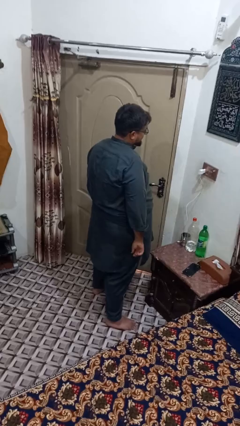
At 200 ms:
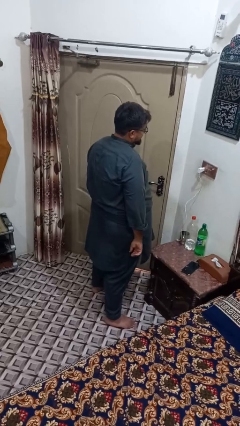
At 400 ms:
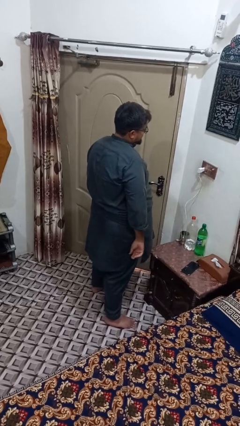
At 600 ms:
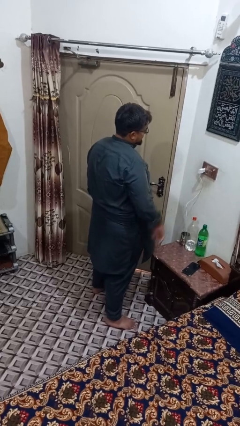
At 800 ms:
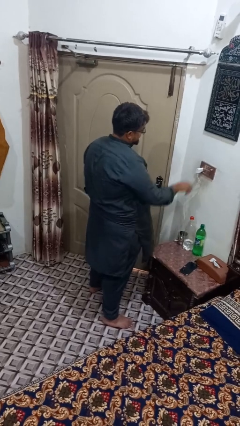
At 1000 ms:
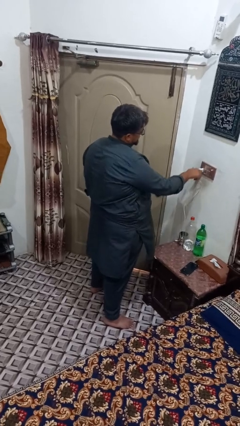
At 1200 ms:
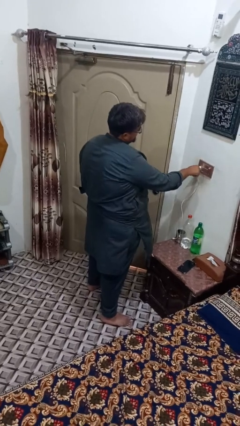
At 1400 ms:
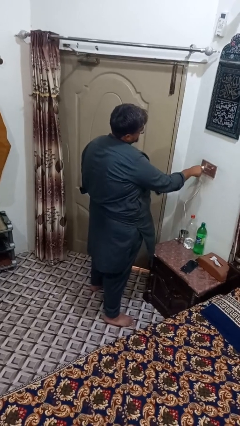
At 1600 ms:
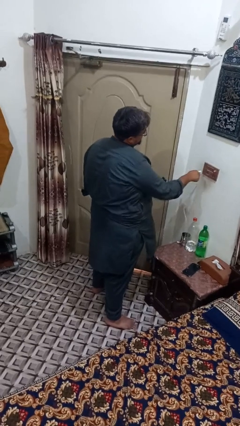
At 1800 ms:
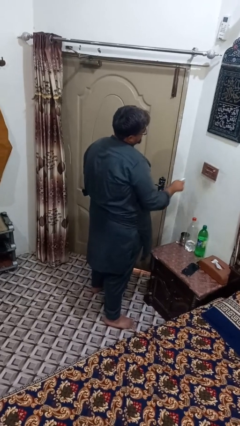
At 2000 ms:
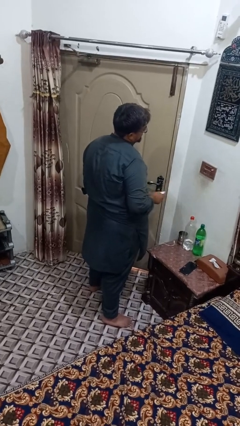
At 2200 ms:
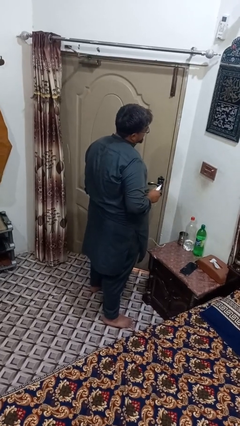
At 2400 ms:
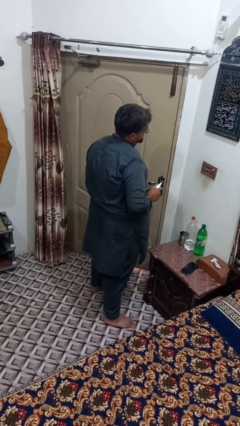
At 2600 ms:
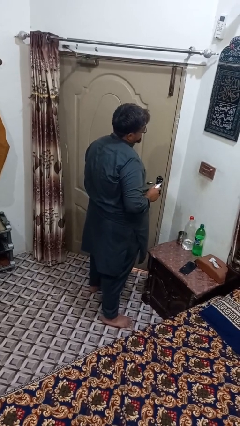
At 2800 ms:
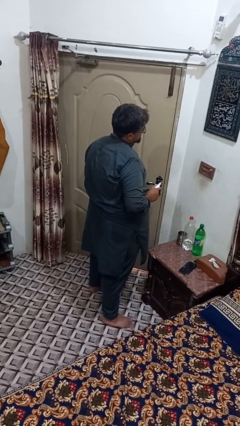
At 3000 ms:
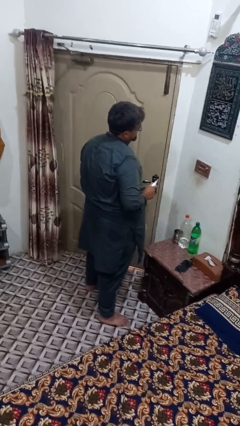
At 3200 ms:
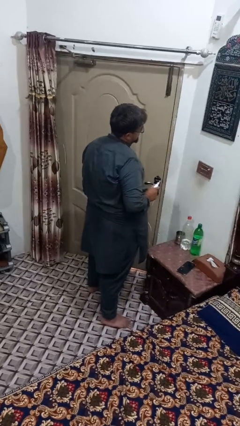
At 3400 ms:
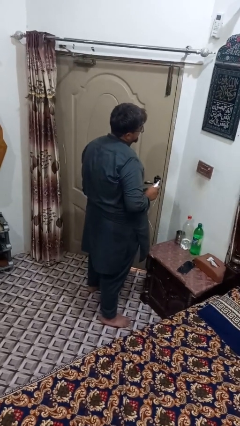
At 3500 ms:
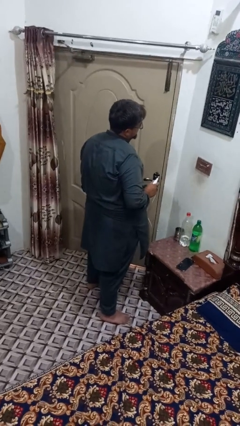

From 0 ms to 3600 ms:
person unplugs from electrical socket

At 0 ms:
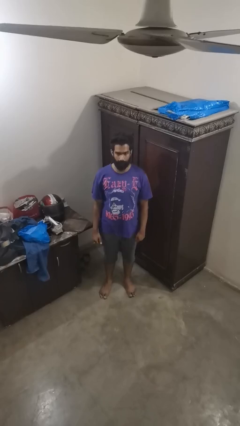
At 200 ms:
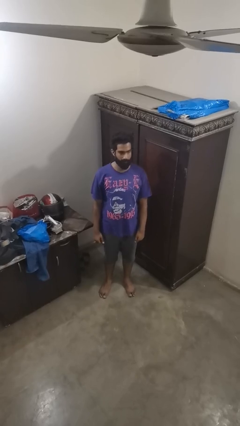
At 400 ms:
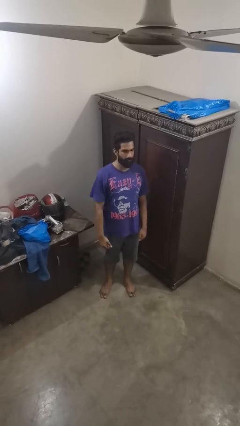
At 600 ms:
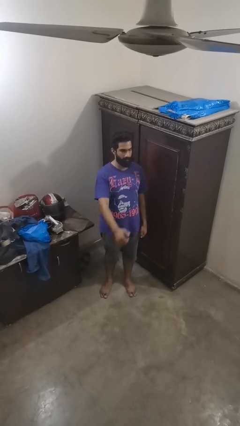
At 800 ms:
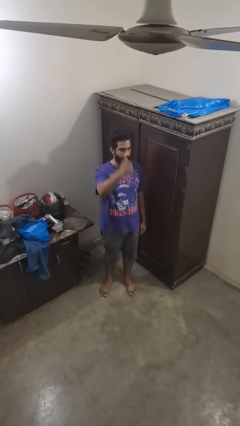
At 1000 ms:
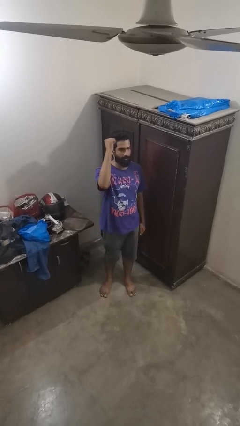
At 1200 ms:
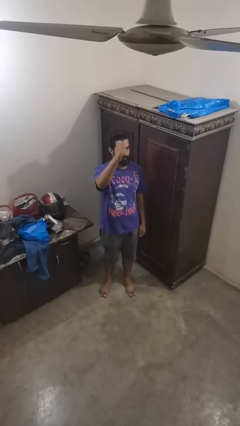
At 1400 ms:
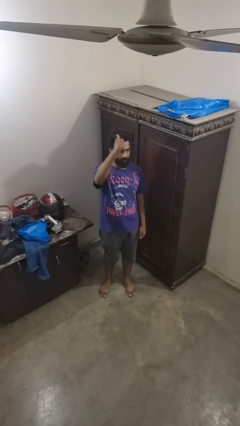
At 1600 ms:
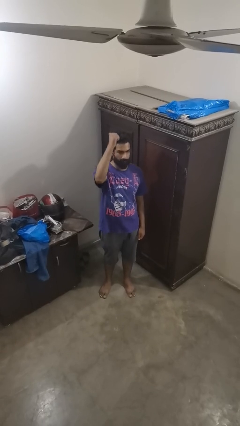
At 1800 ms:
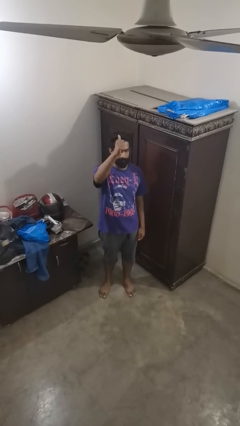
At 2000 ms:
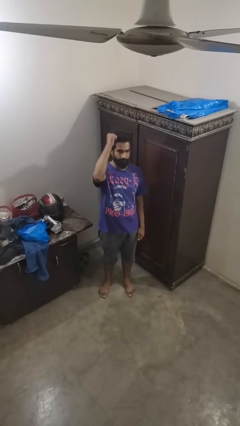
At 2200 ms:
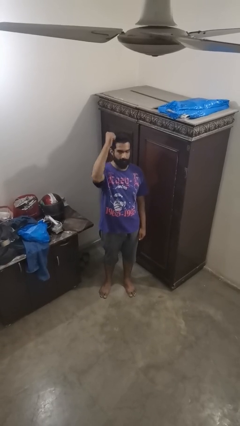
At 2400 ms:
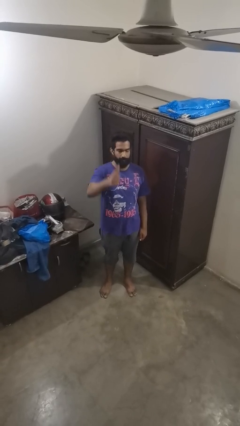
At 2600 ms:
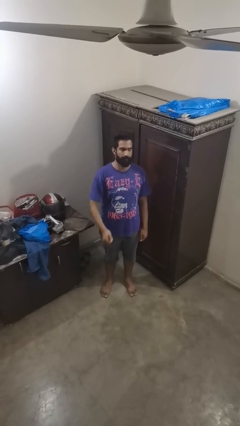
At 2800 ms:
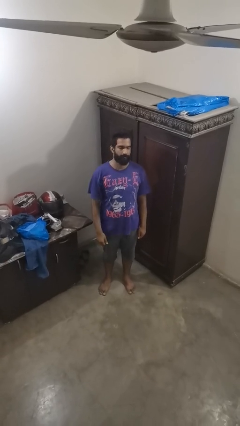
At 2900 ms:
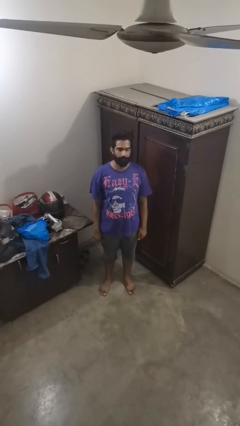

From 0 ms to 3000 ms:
person gestures behind me

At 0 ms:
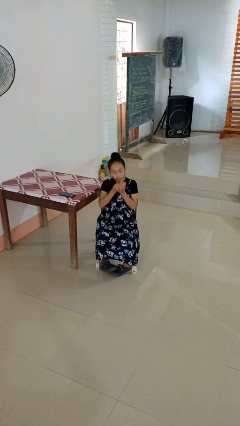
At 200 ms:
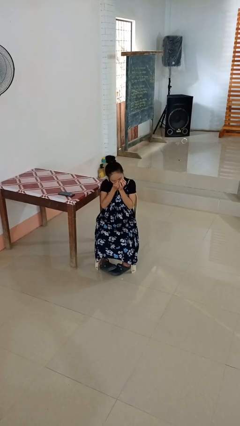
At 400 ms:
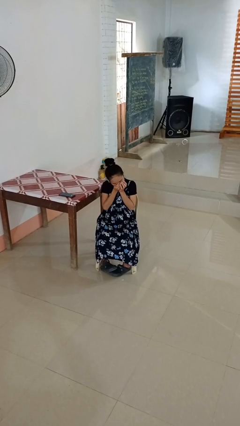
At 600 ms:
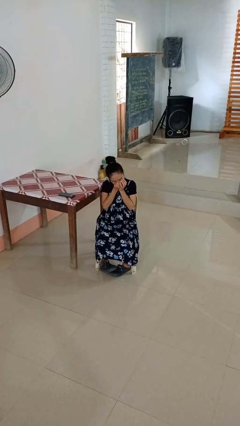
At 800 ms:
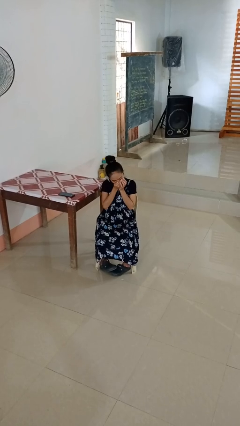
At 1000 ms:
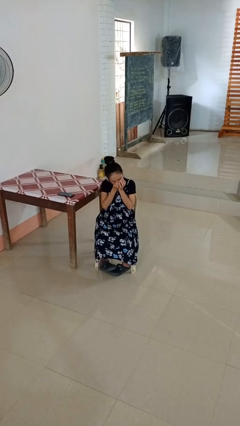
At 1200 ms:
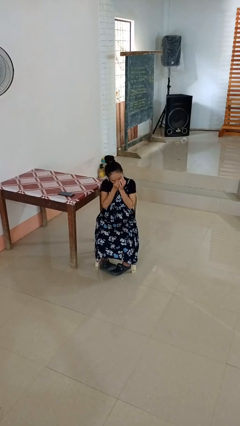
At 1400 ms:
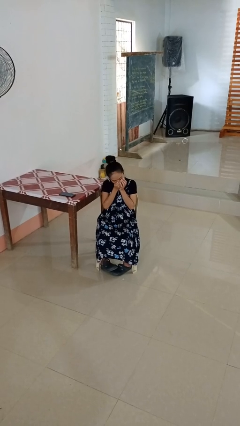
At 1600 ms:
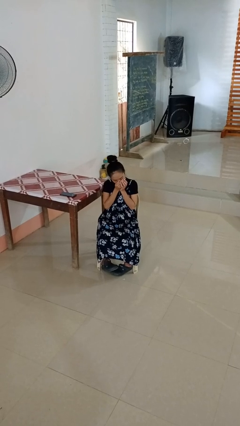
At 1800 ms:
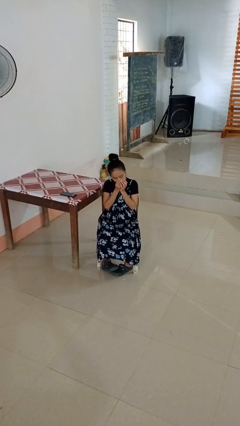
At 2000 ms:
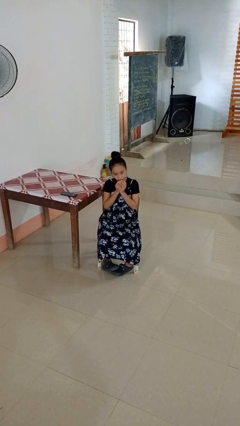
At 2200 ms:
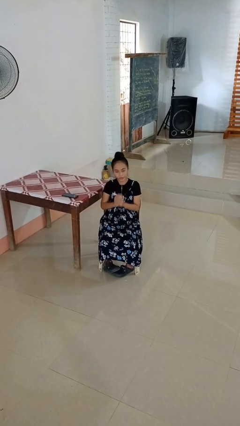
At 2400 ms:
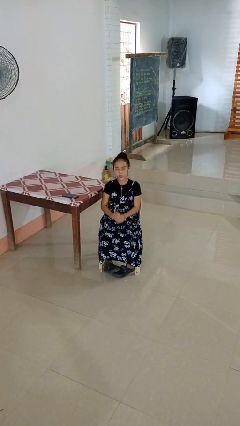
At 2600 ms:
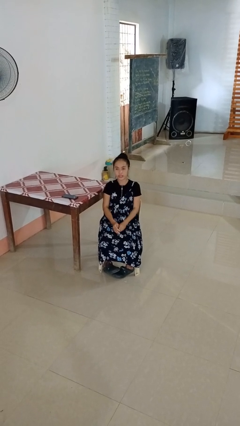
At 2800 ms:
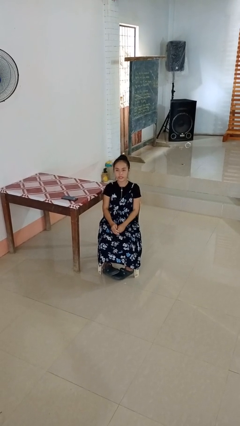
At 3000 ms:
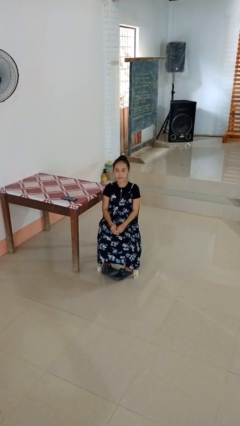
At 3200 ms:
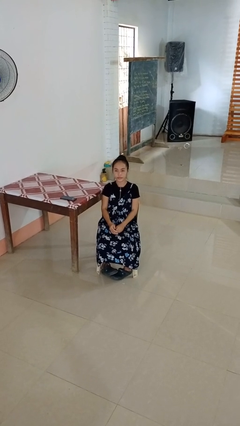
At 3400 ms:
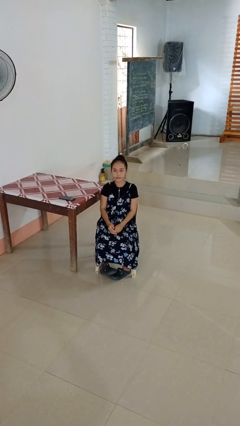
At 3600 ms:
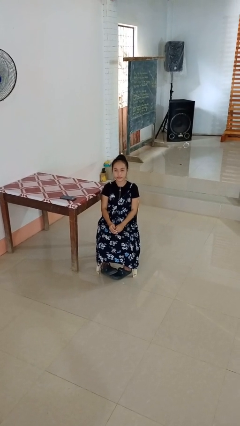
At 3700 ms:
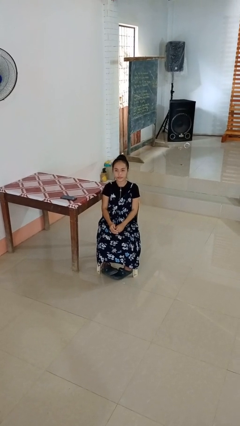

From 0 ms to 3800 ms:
person sneezes into hand

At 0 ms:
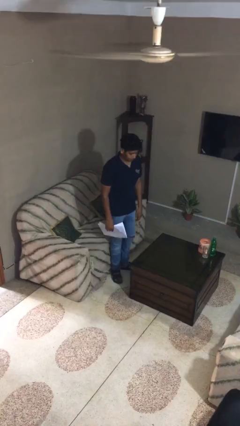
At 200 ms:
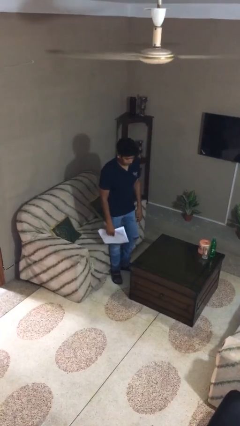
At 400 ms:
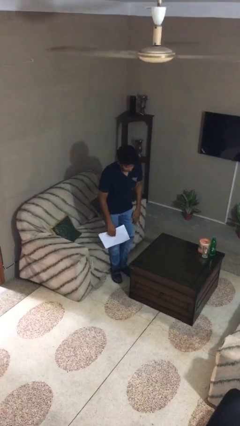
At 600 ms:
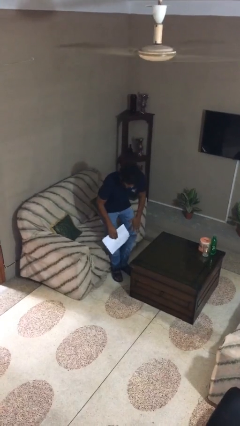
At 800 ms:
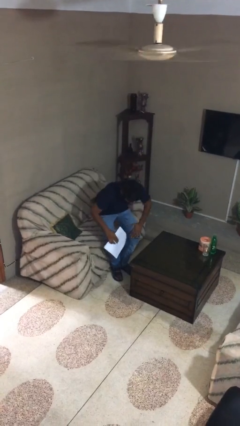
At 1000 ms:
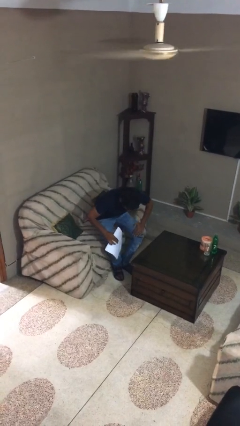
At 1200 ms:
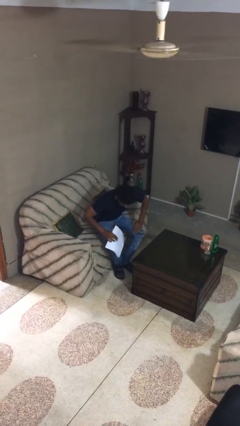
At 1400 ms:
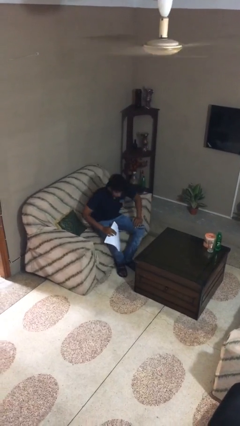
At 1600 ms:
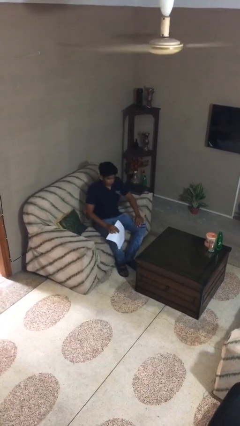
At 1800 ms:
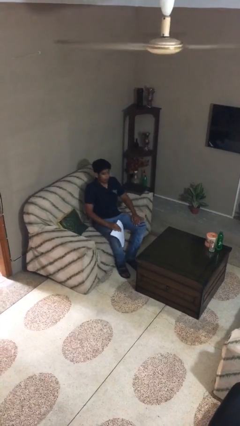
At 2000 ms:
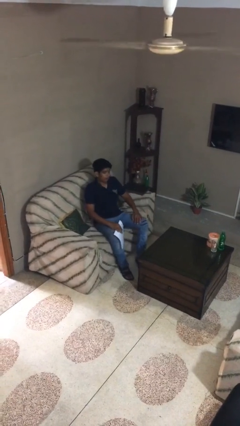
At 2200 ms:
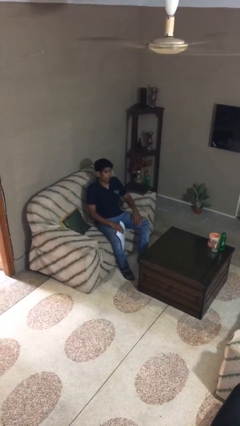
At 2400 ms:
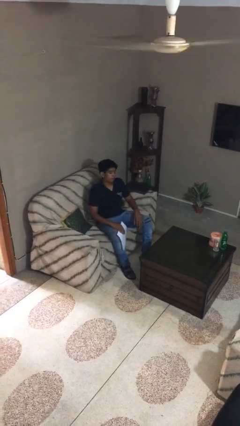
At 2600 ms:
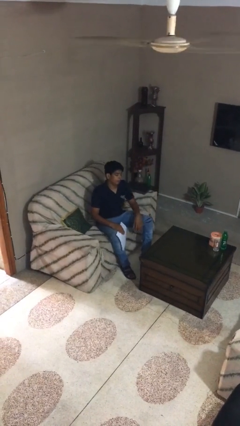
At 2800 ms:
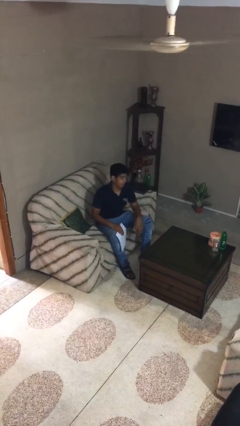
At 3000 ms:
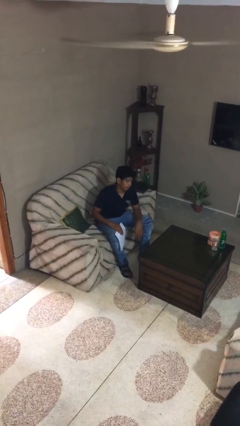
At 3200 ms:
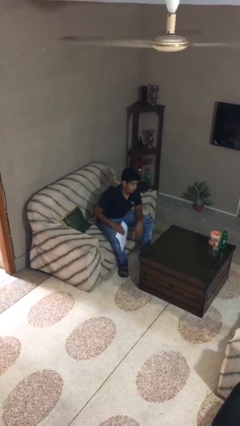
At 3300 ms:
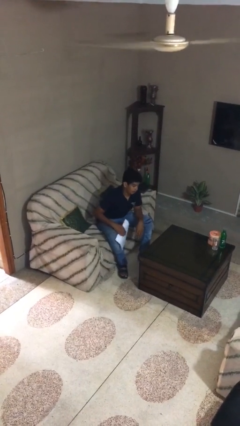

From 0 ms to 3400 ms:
person sits down

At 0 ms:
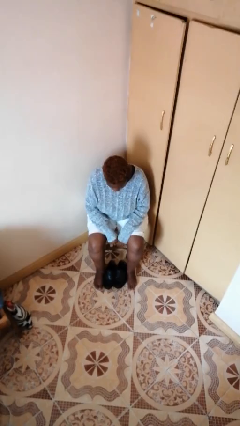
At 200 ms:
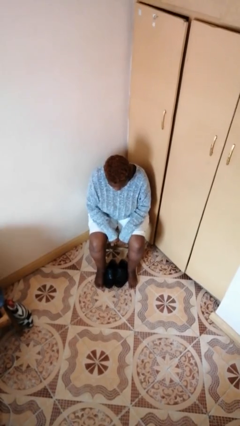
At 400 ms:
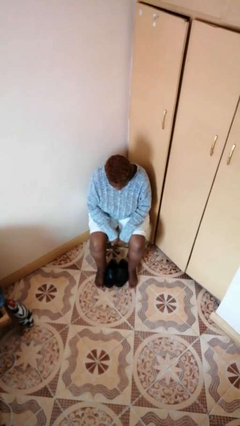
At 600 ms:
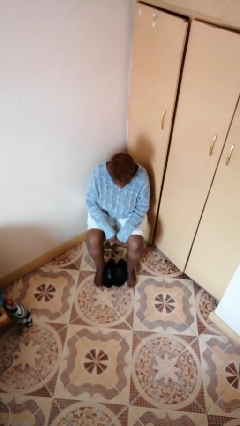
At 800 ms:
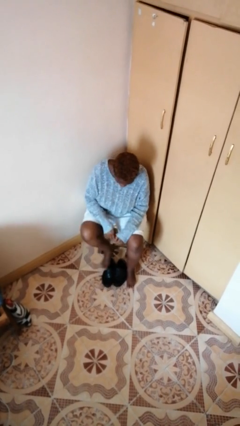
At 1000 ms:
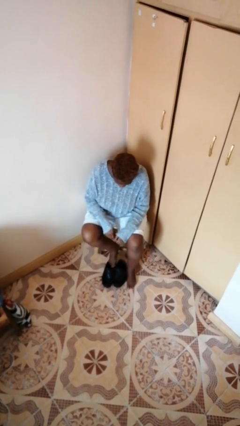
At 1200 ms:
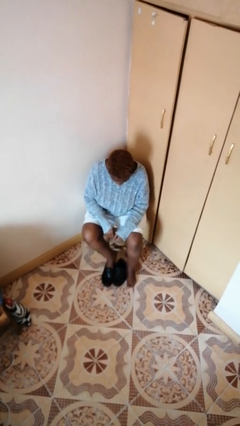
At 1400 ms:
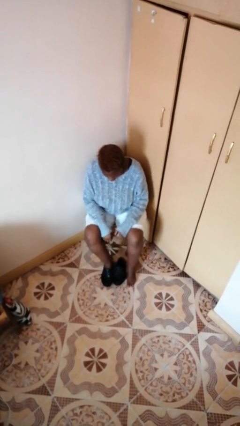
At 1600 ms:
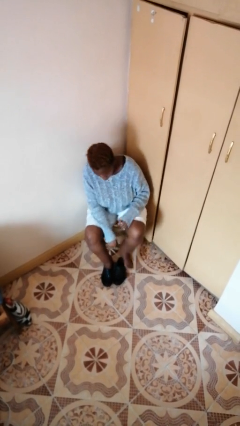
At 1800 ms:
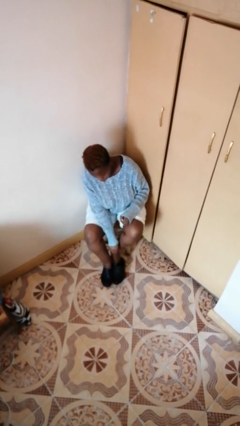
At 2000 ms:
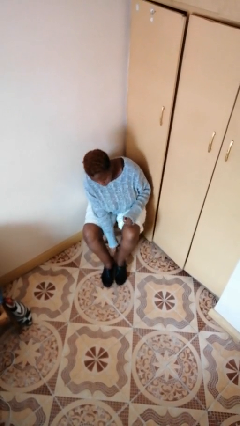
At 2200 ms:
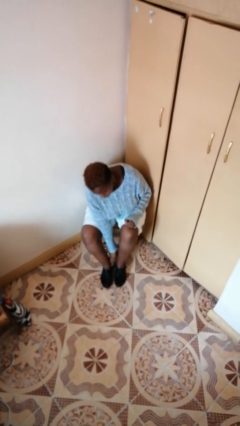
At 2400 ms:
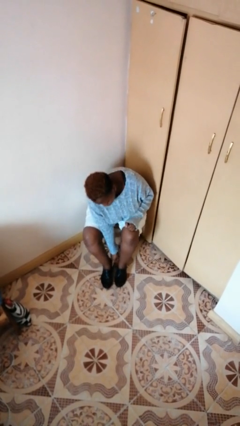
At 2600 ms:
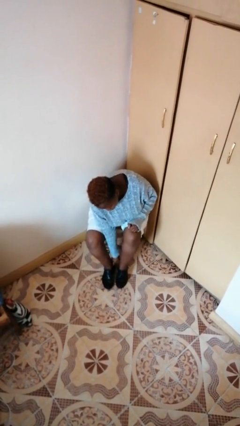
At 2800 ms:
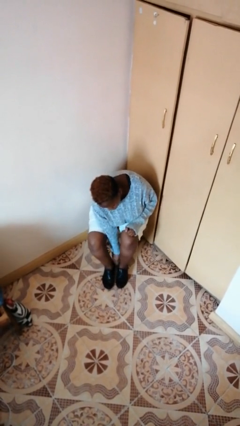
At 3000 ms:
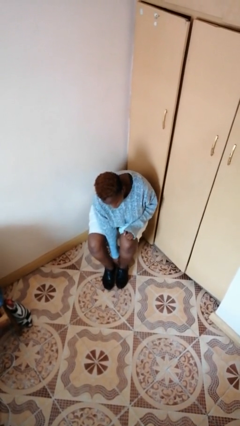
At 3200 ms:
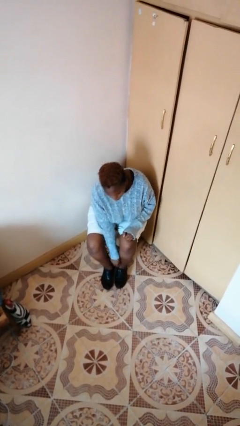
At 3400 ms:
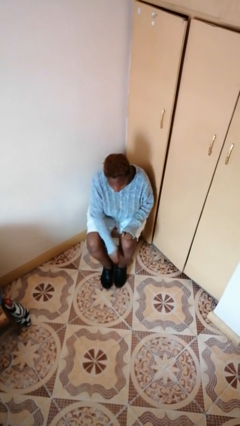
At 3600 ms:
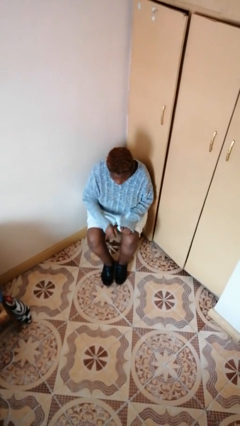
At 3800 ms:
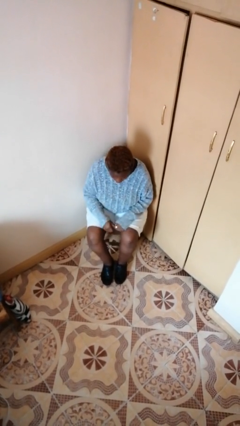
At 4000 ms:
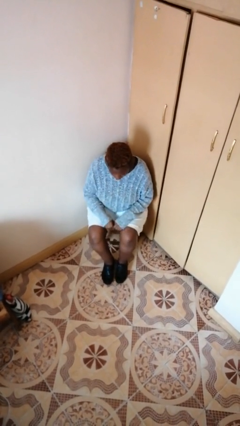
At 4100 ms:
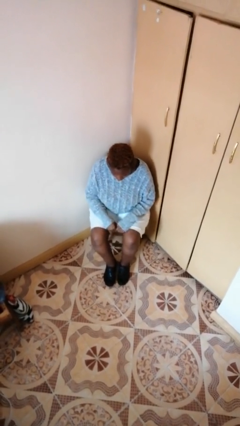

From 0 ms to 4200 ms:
person puts on shoes
